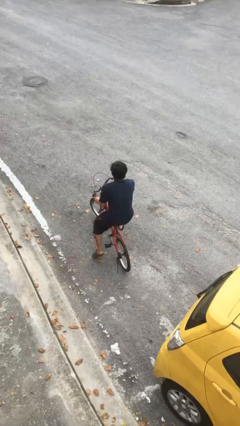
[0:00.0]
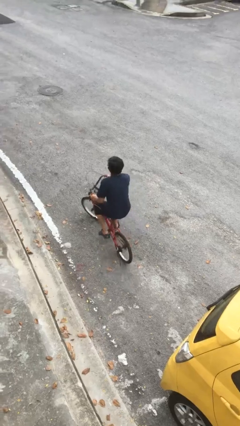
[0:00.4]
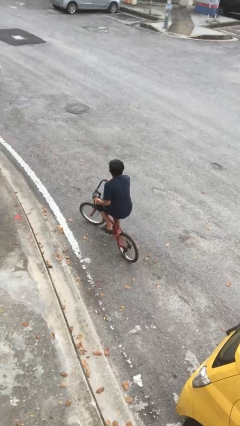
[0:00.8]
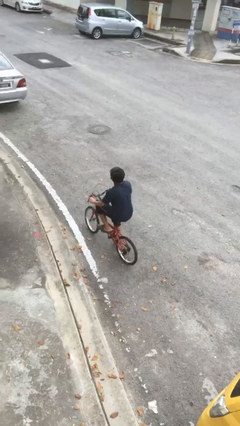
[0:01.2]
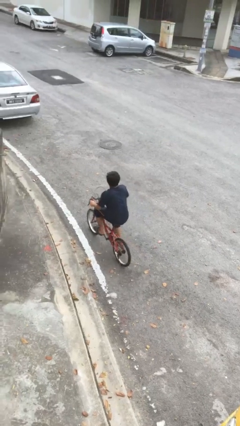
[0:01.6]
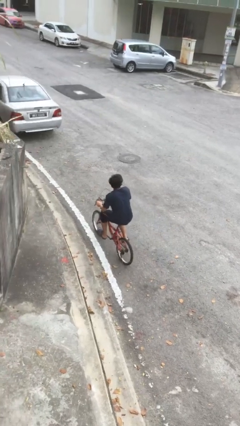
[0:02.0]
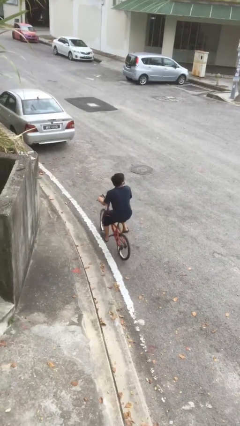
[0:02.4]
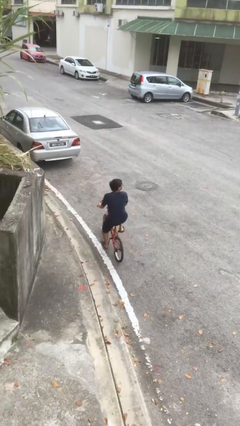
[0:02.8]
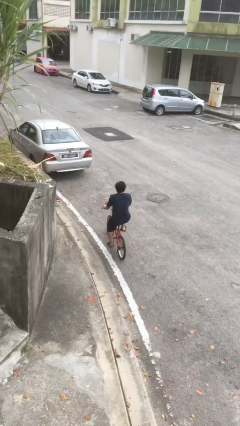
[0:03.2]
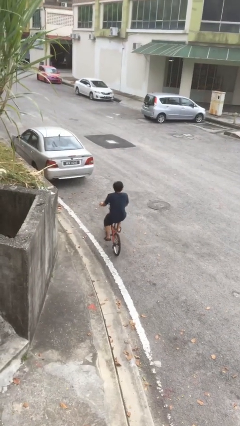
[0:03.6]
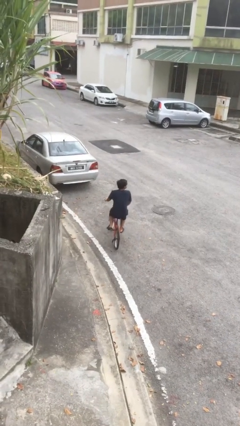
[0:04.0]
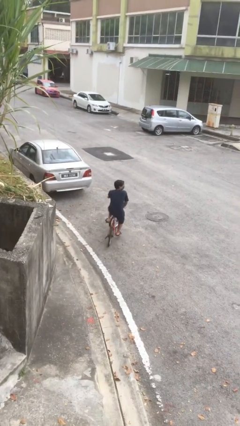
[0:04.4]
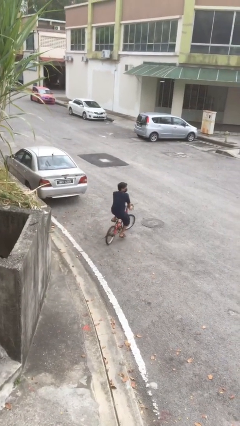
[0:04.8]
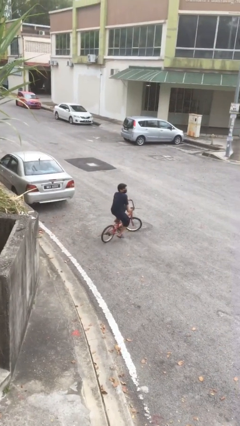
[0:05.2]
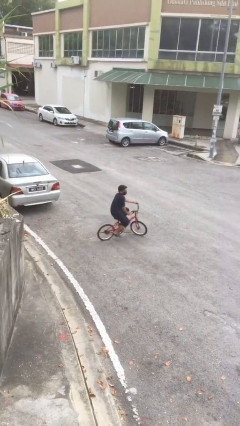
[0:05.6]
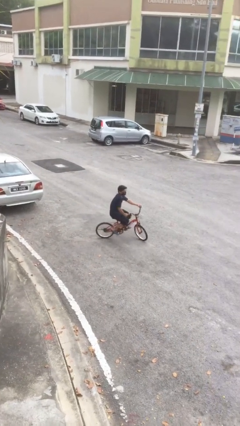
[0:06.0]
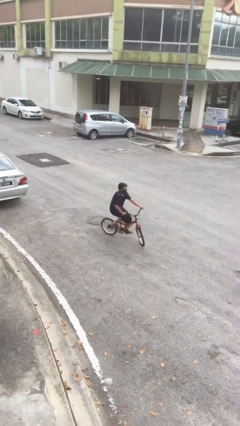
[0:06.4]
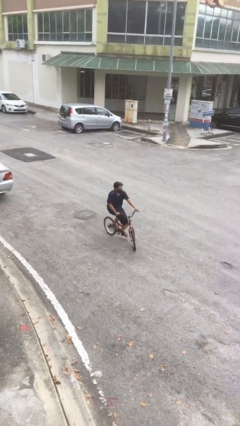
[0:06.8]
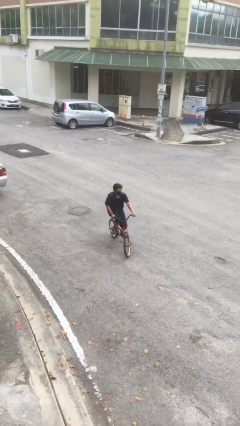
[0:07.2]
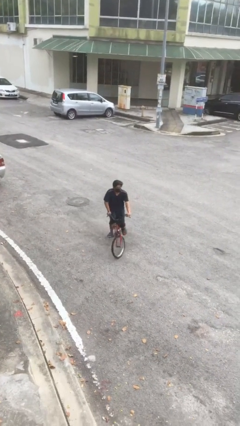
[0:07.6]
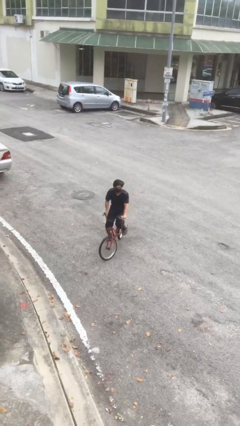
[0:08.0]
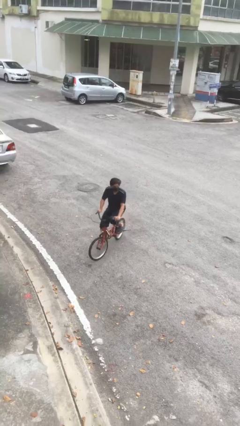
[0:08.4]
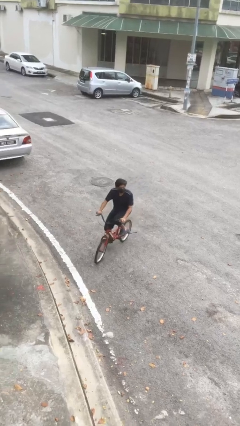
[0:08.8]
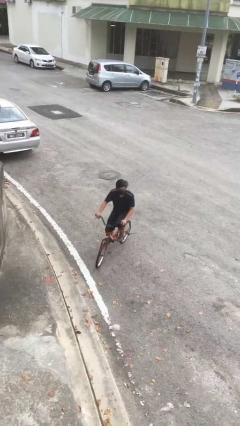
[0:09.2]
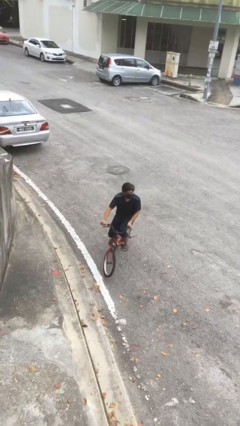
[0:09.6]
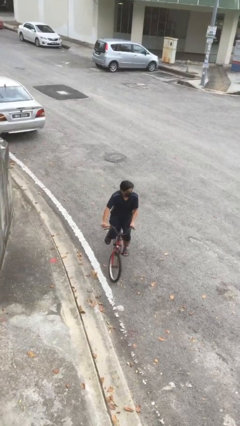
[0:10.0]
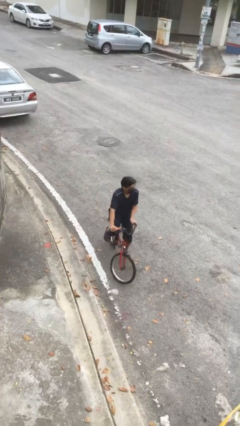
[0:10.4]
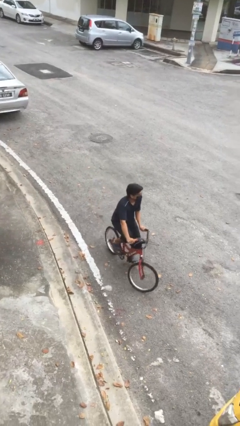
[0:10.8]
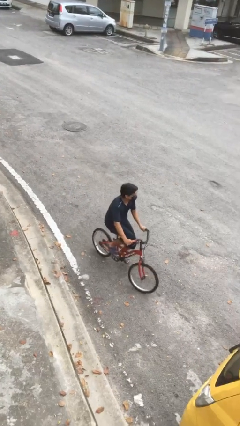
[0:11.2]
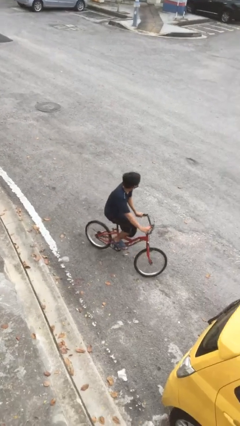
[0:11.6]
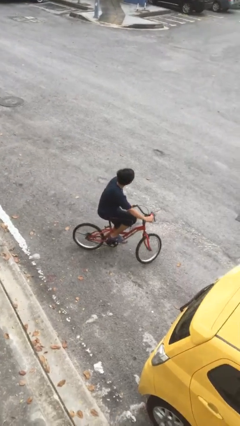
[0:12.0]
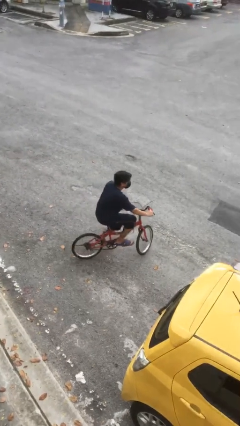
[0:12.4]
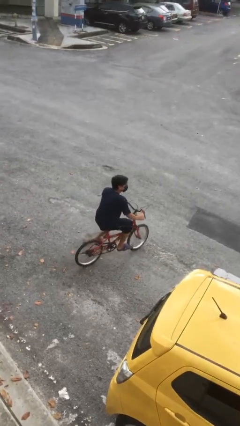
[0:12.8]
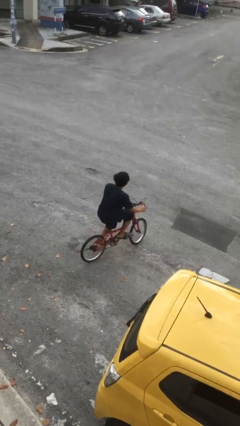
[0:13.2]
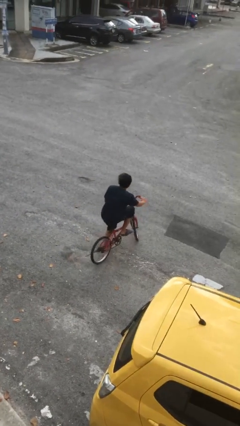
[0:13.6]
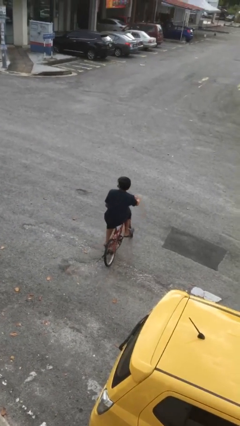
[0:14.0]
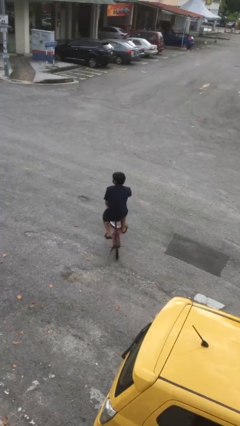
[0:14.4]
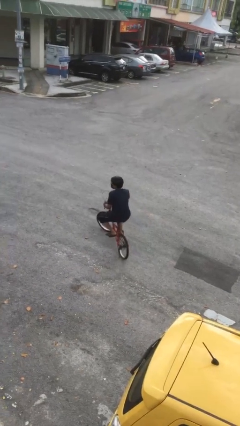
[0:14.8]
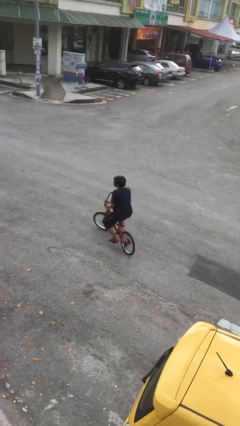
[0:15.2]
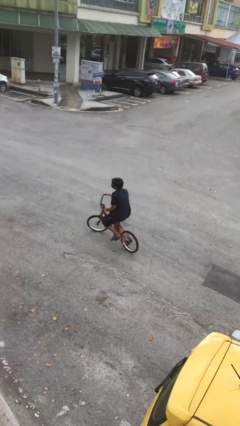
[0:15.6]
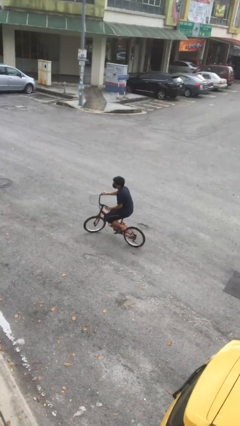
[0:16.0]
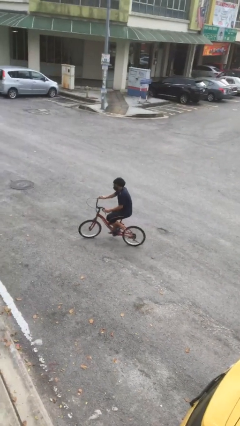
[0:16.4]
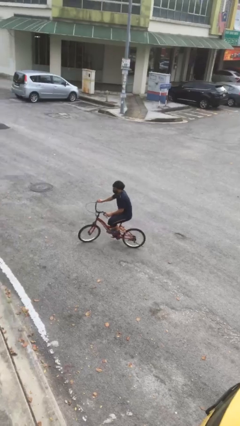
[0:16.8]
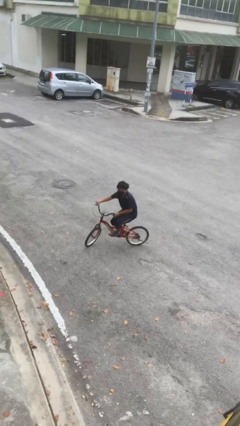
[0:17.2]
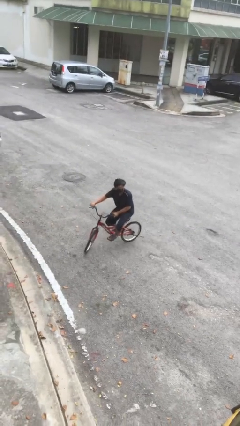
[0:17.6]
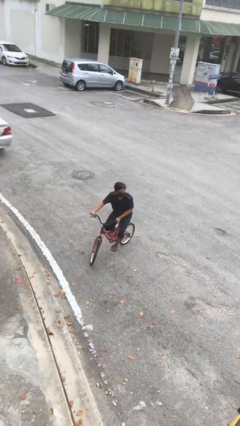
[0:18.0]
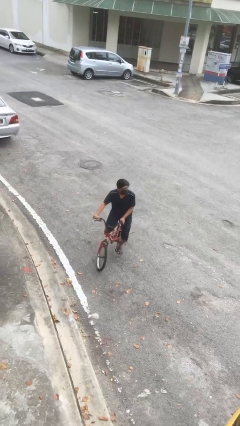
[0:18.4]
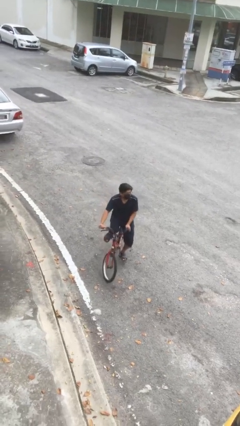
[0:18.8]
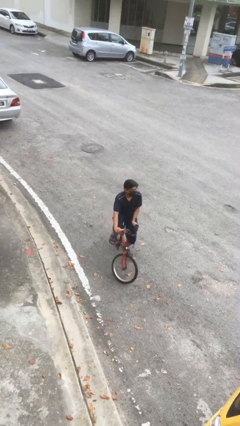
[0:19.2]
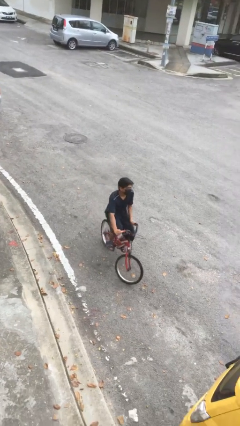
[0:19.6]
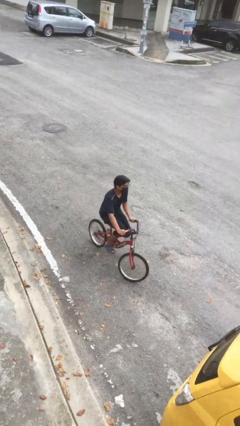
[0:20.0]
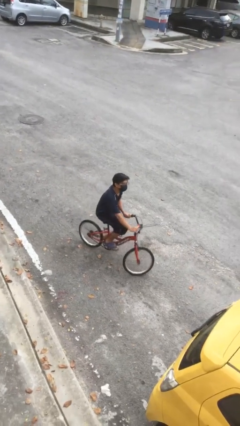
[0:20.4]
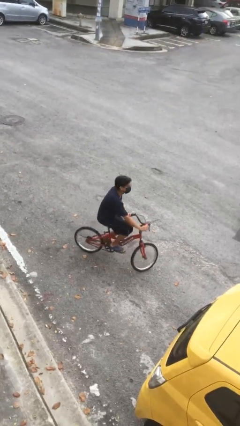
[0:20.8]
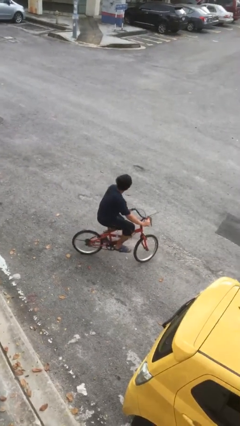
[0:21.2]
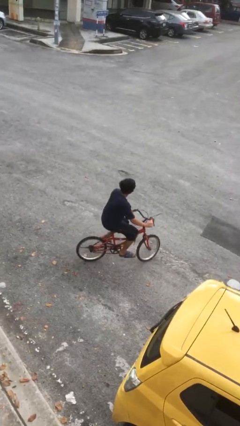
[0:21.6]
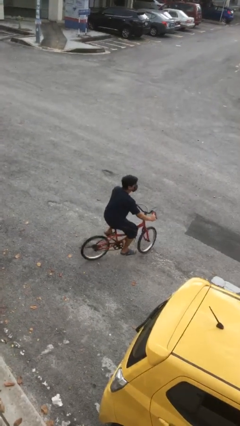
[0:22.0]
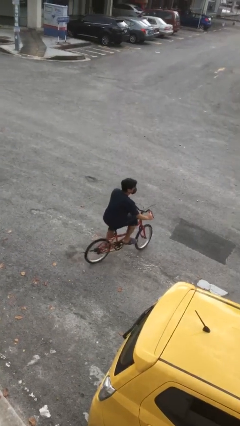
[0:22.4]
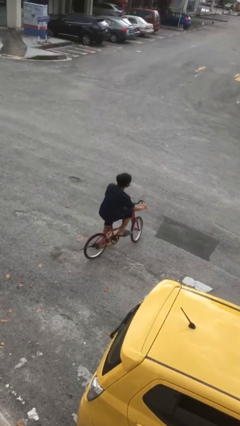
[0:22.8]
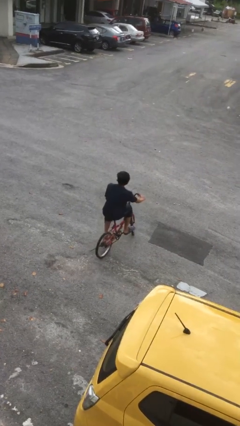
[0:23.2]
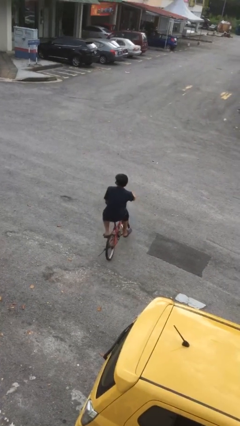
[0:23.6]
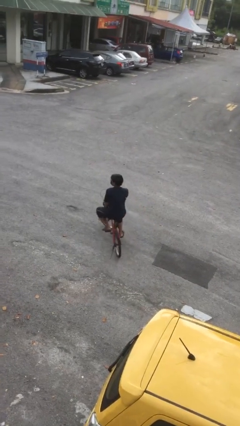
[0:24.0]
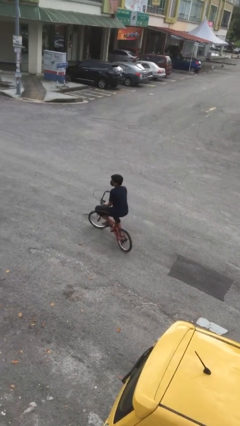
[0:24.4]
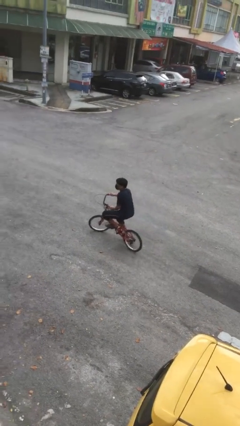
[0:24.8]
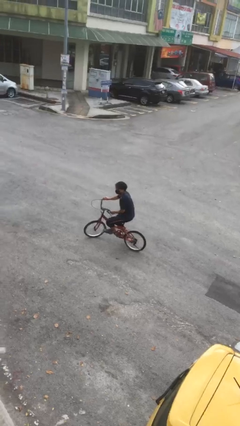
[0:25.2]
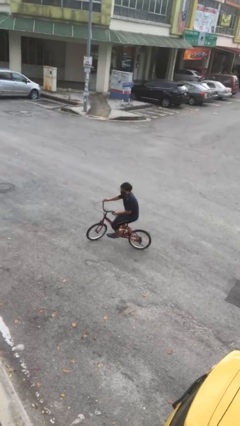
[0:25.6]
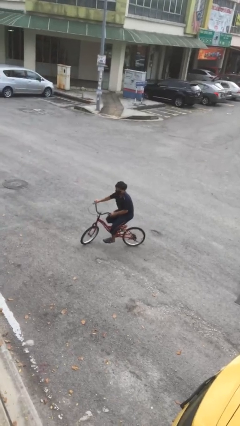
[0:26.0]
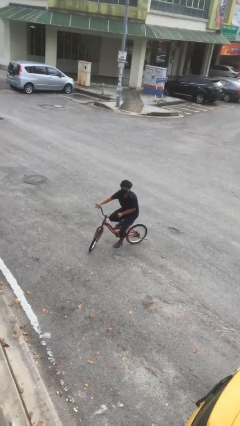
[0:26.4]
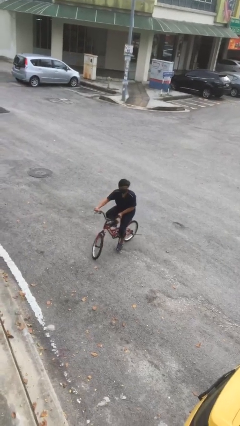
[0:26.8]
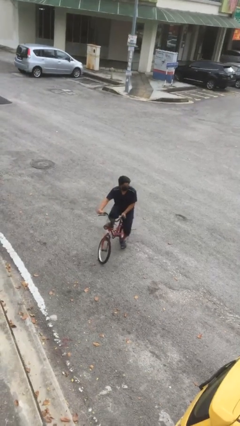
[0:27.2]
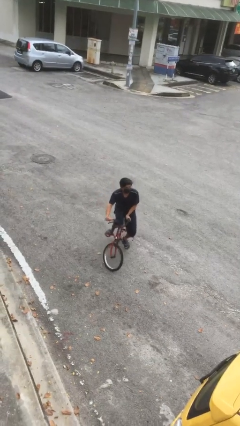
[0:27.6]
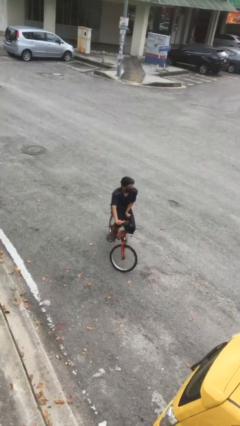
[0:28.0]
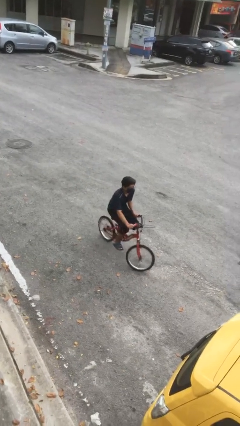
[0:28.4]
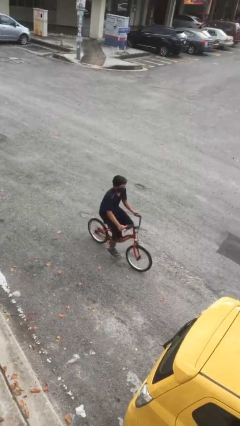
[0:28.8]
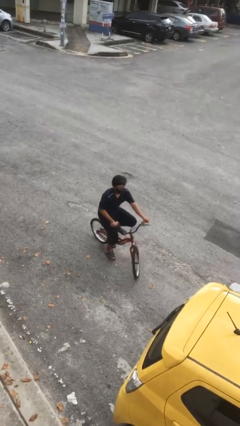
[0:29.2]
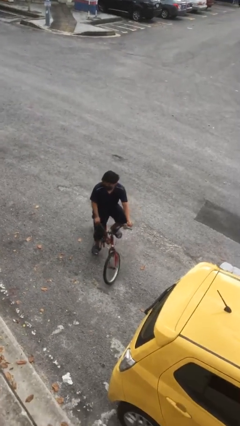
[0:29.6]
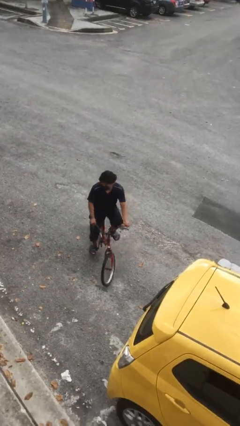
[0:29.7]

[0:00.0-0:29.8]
person rides bicycle

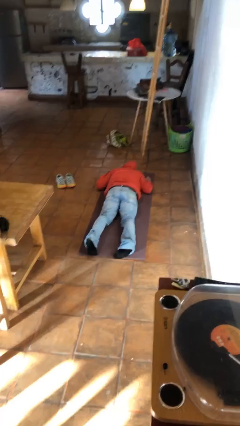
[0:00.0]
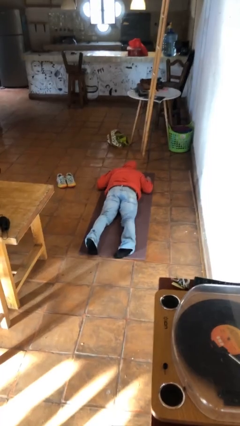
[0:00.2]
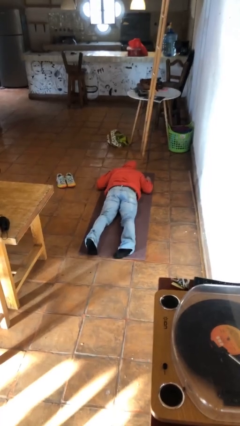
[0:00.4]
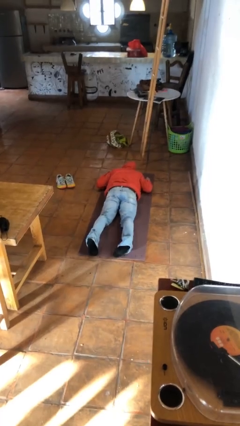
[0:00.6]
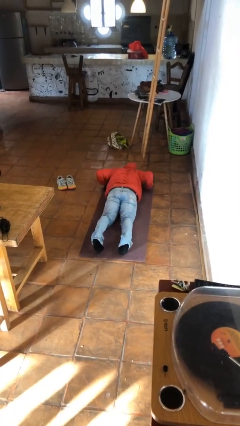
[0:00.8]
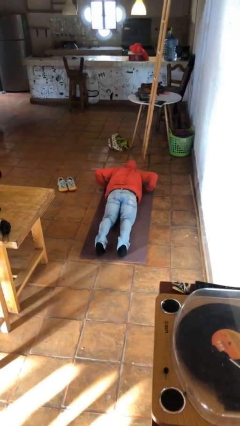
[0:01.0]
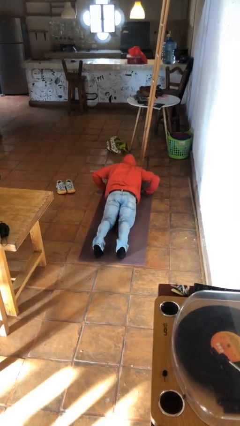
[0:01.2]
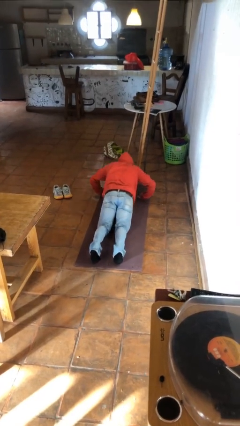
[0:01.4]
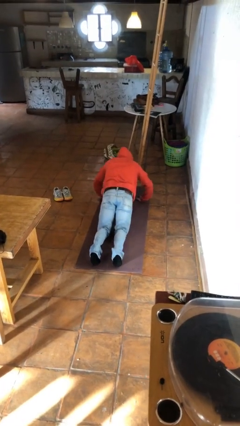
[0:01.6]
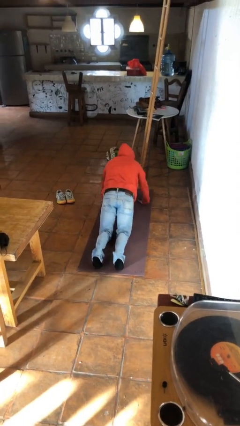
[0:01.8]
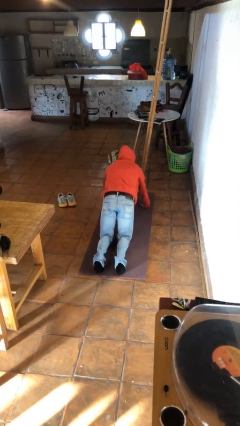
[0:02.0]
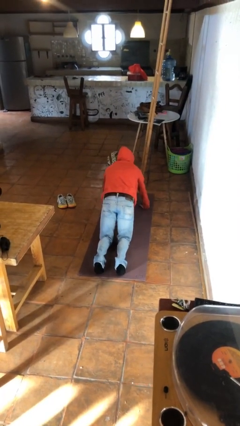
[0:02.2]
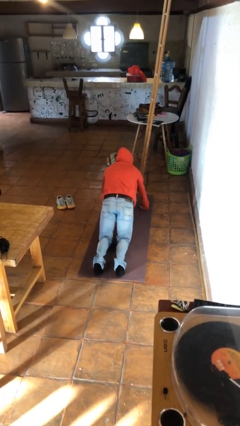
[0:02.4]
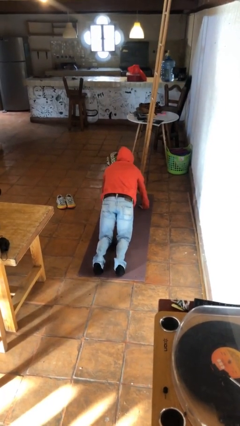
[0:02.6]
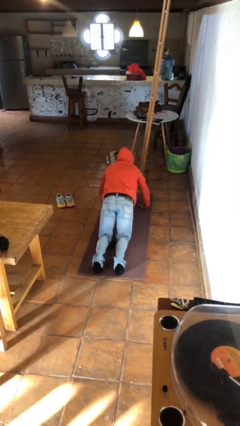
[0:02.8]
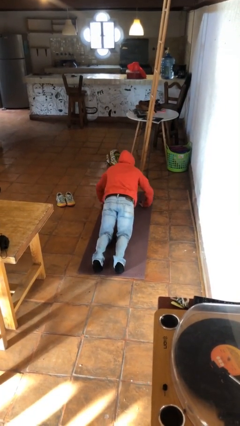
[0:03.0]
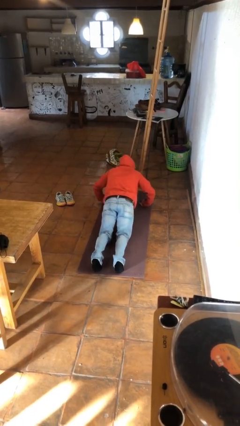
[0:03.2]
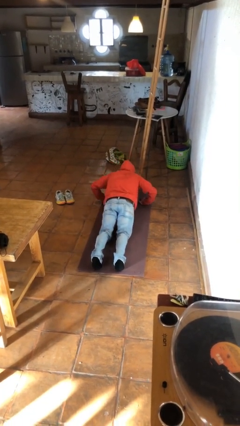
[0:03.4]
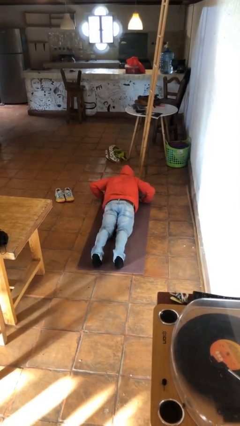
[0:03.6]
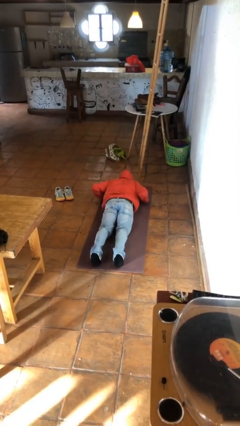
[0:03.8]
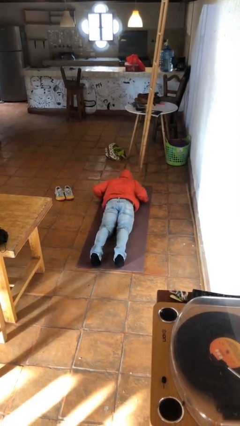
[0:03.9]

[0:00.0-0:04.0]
person exercises with pushup
